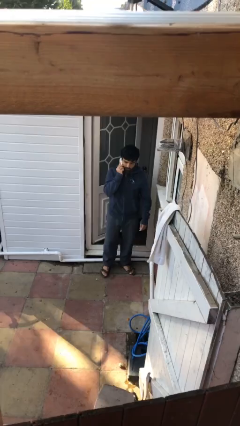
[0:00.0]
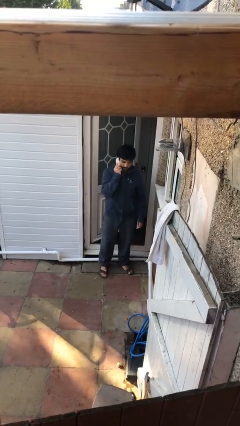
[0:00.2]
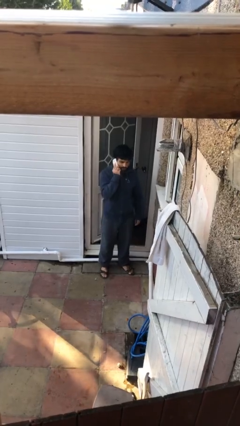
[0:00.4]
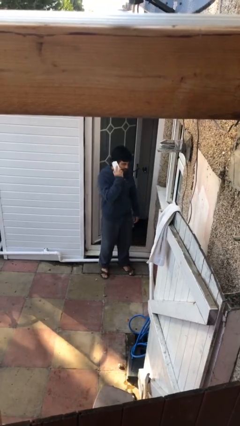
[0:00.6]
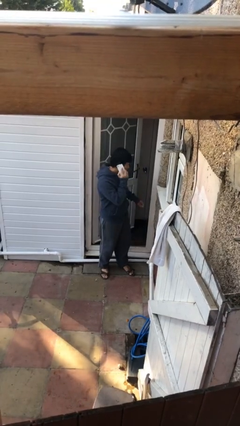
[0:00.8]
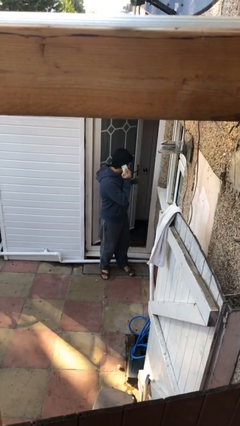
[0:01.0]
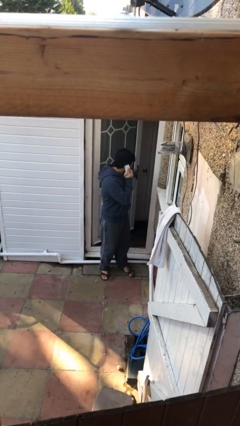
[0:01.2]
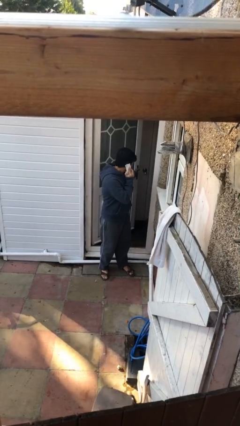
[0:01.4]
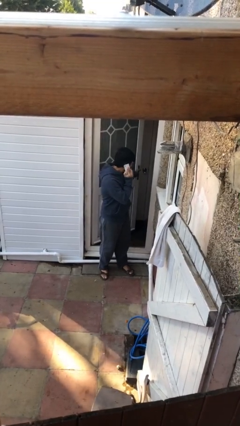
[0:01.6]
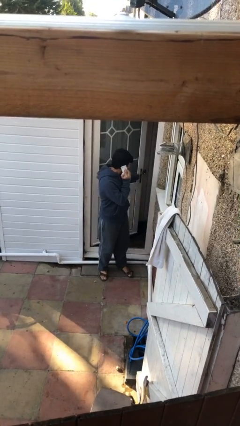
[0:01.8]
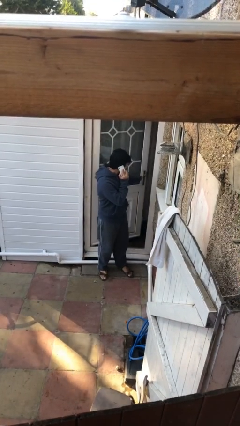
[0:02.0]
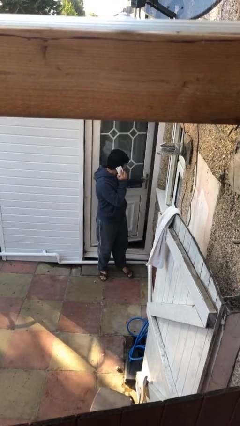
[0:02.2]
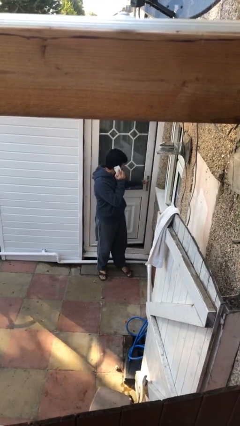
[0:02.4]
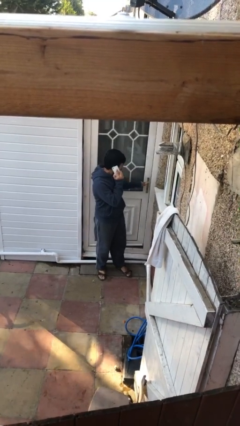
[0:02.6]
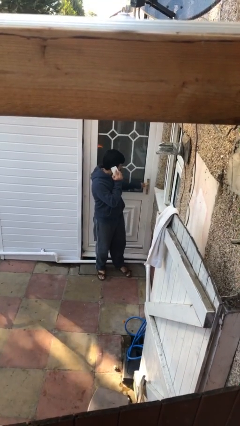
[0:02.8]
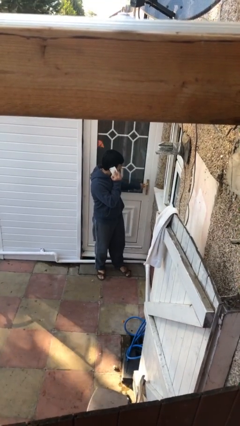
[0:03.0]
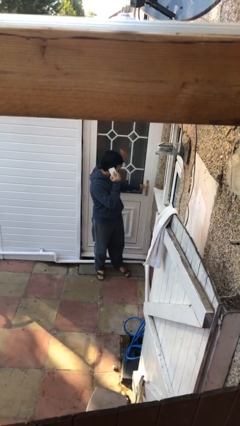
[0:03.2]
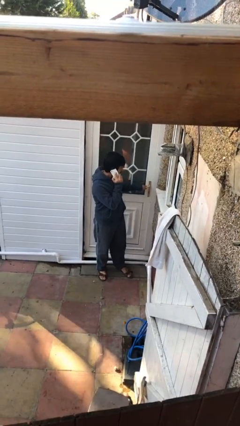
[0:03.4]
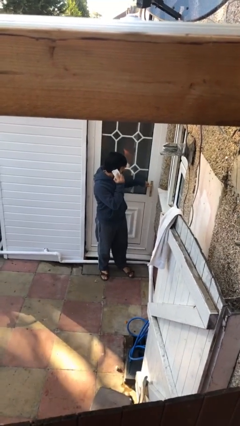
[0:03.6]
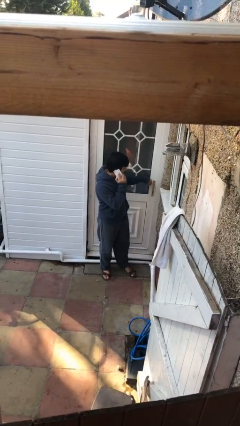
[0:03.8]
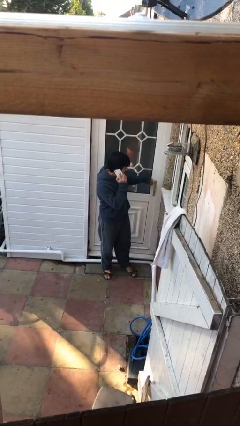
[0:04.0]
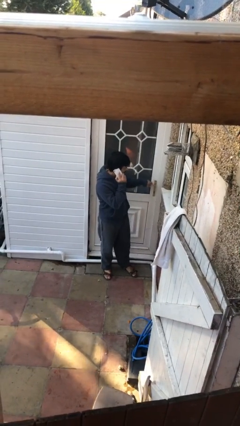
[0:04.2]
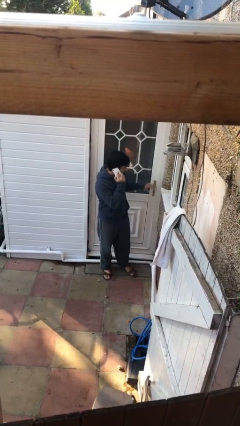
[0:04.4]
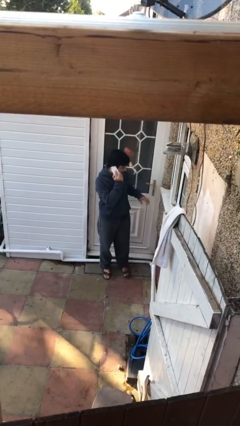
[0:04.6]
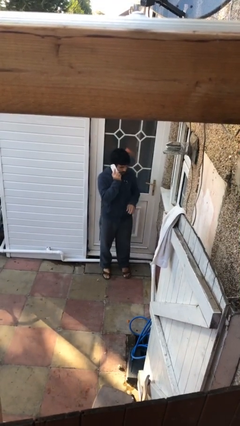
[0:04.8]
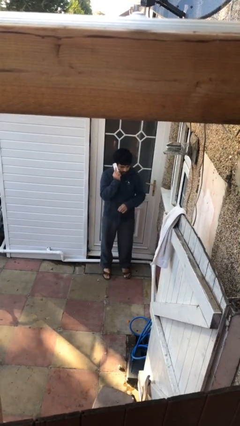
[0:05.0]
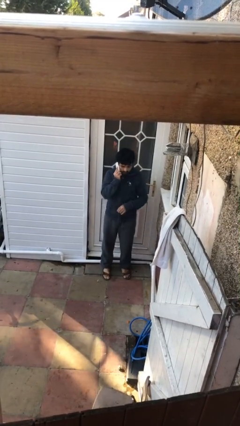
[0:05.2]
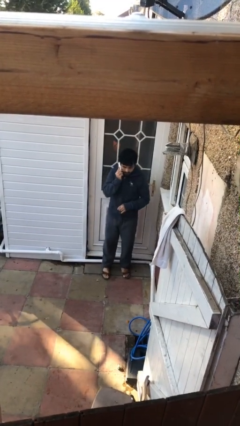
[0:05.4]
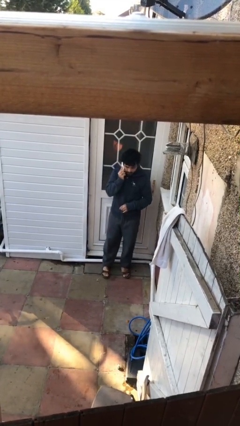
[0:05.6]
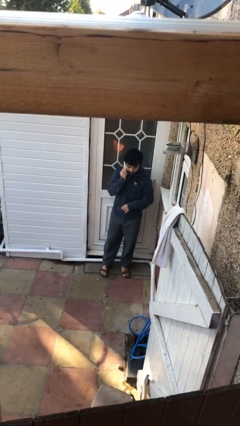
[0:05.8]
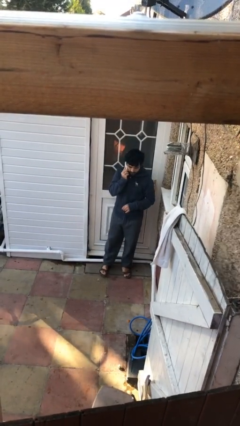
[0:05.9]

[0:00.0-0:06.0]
person closes facility door

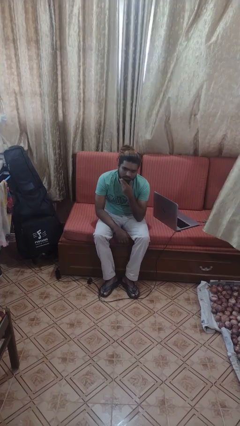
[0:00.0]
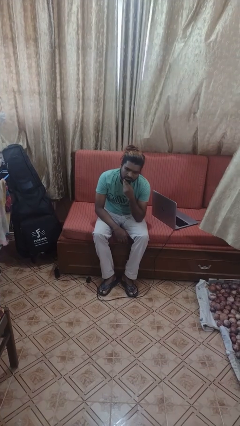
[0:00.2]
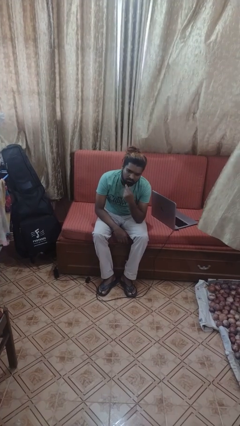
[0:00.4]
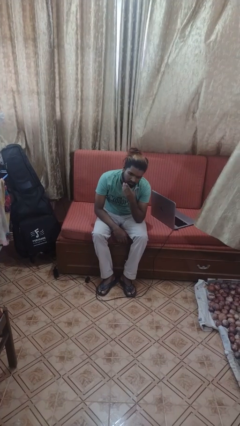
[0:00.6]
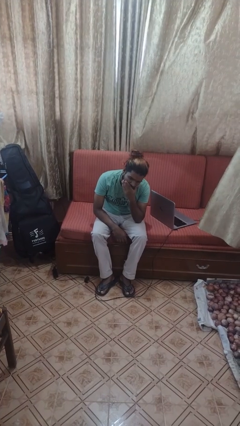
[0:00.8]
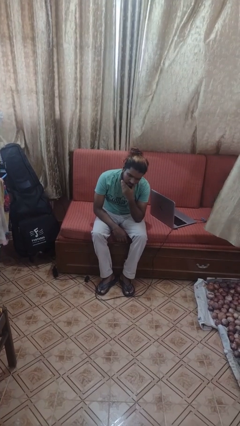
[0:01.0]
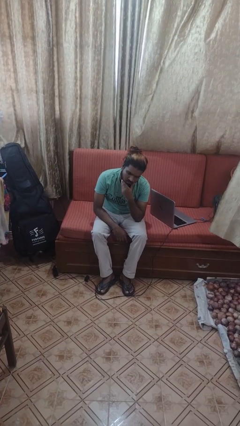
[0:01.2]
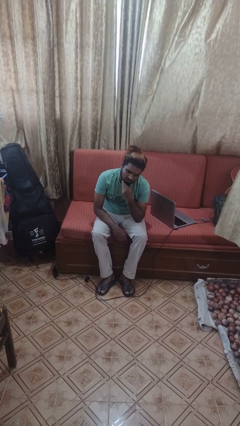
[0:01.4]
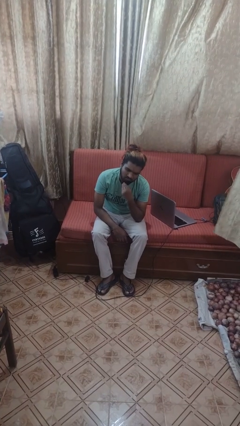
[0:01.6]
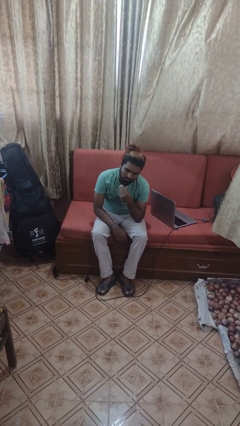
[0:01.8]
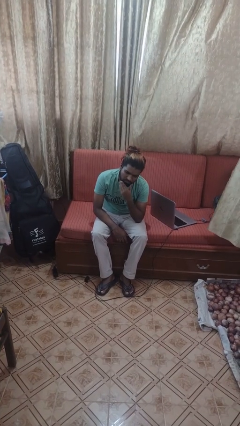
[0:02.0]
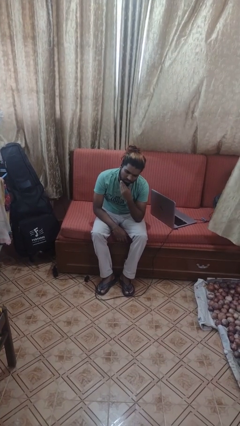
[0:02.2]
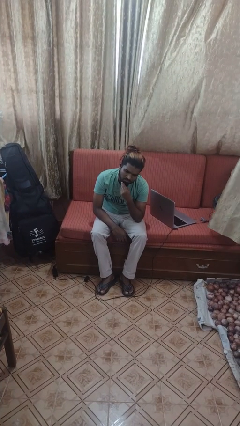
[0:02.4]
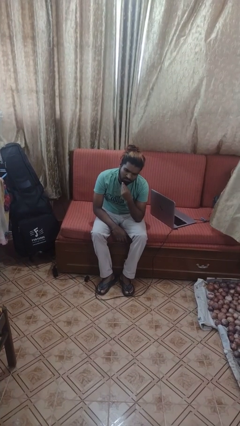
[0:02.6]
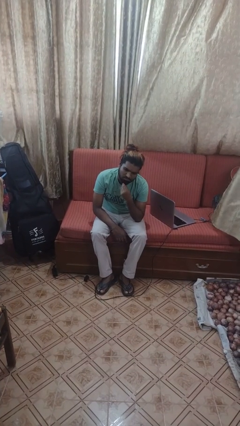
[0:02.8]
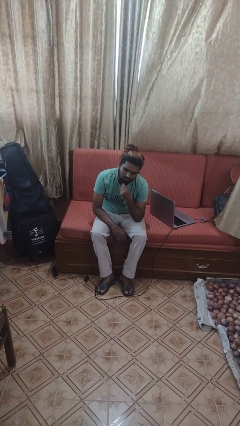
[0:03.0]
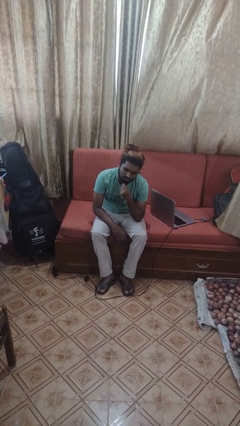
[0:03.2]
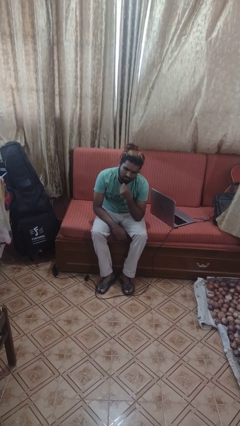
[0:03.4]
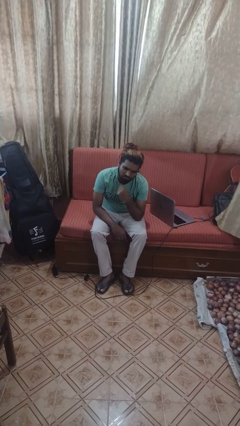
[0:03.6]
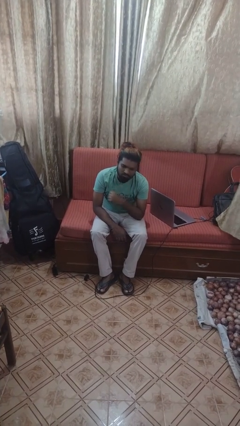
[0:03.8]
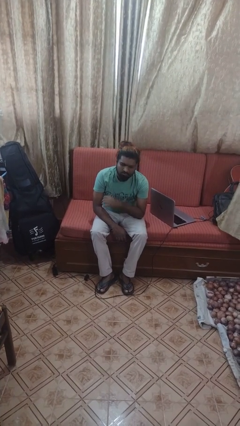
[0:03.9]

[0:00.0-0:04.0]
person strokes chin

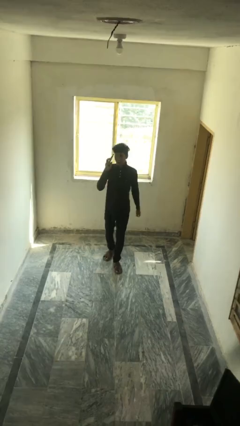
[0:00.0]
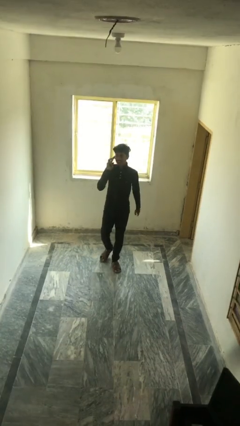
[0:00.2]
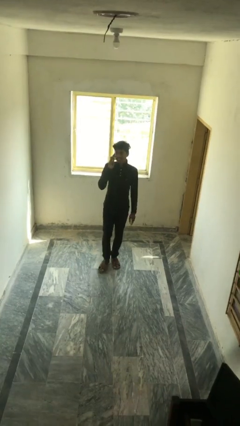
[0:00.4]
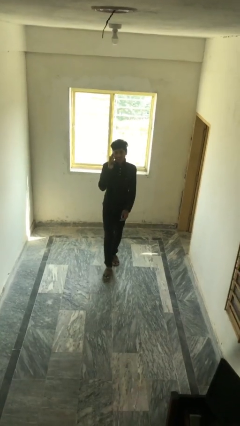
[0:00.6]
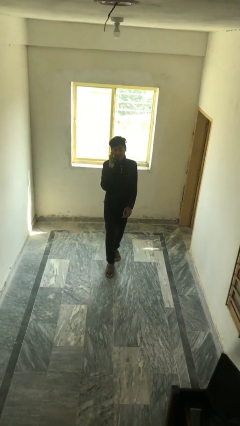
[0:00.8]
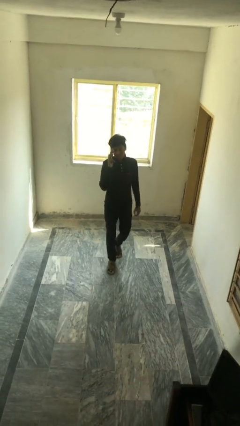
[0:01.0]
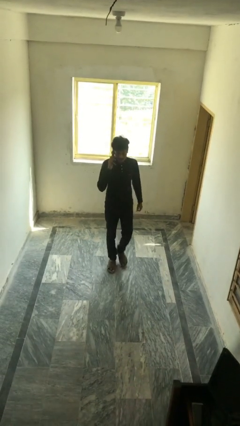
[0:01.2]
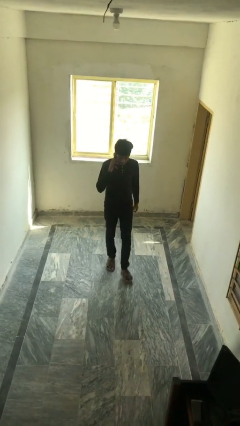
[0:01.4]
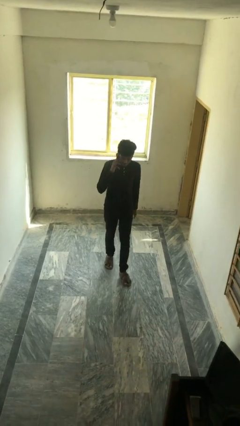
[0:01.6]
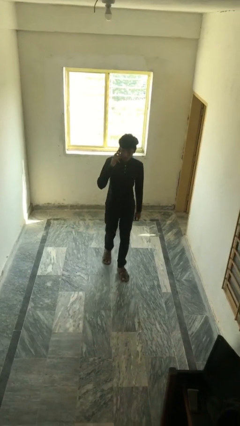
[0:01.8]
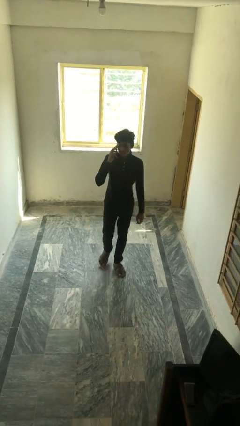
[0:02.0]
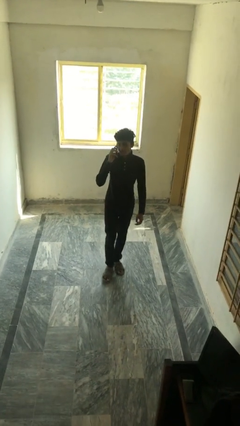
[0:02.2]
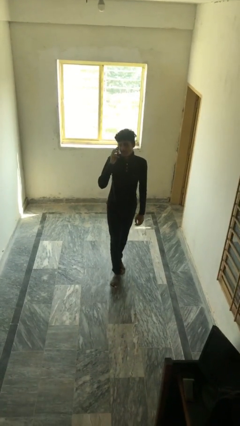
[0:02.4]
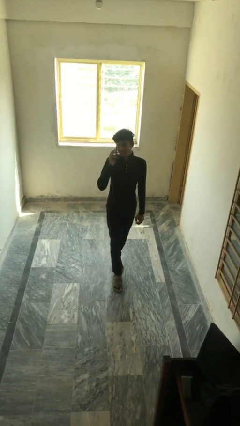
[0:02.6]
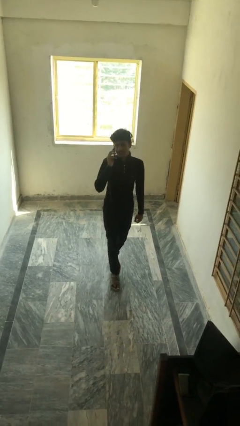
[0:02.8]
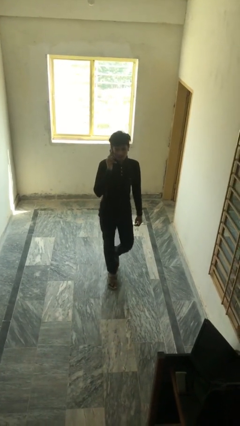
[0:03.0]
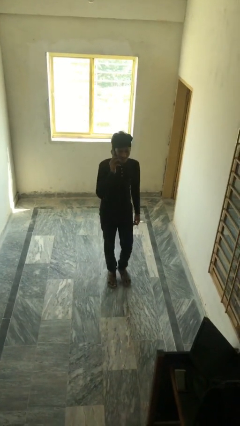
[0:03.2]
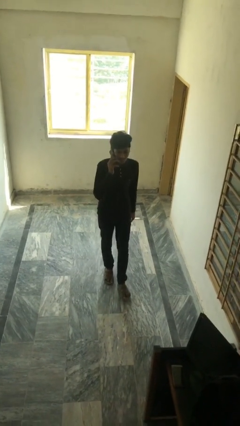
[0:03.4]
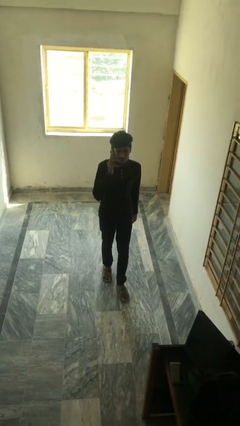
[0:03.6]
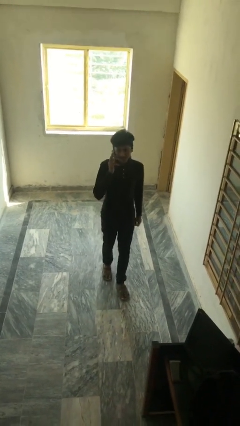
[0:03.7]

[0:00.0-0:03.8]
person talks on phone

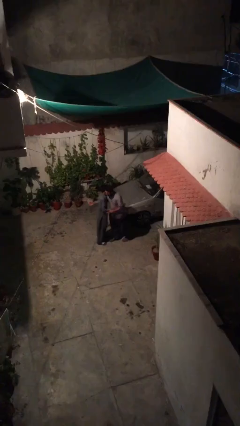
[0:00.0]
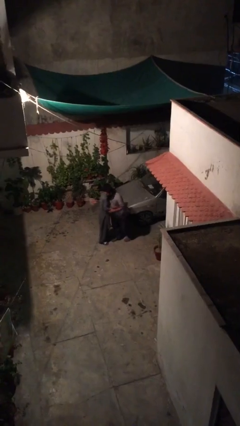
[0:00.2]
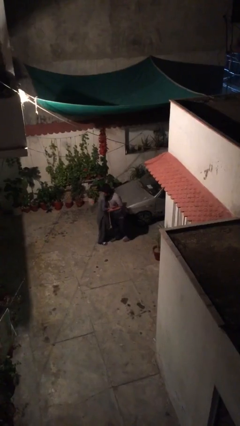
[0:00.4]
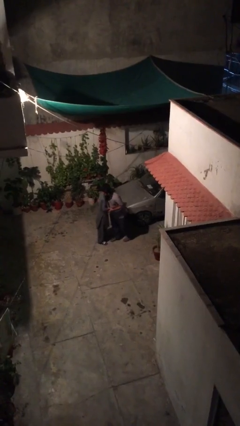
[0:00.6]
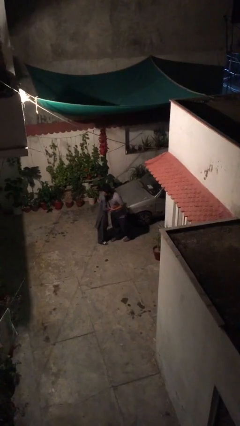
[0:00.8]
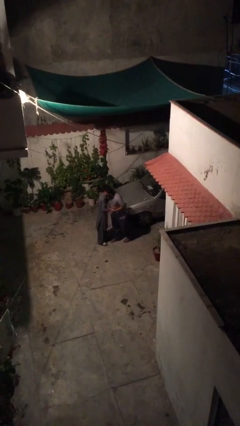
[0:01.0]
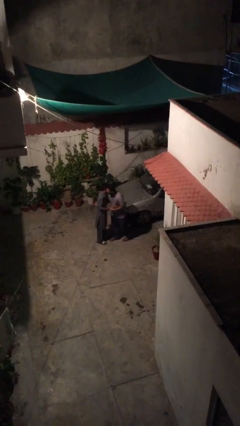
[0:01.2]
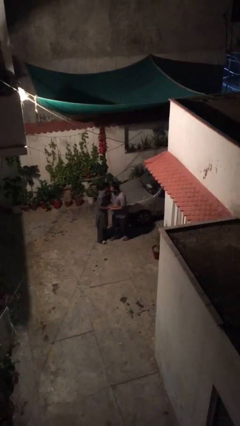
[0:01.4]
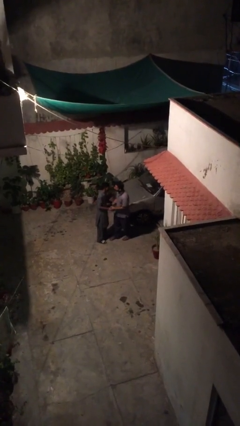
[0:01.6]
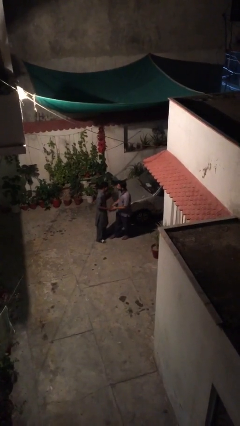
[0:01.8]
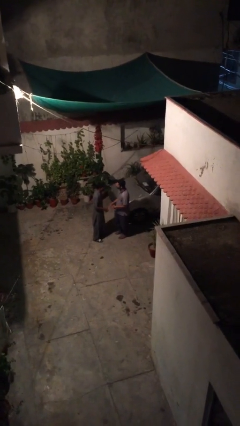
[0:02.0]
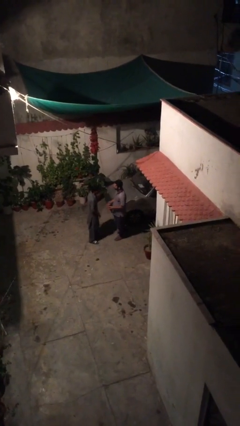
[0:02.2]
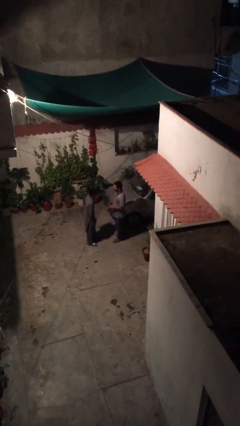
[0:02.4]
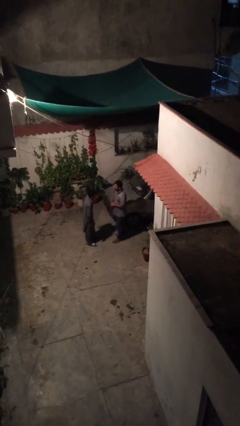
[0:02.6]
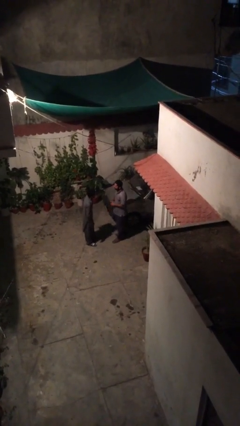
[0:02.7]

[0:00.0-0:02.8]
person embraces person

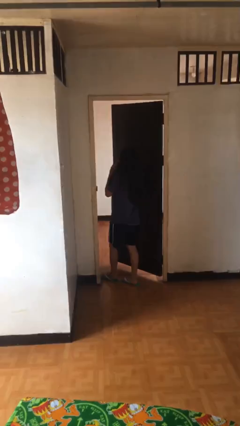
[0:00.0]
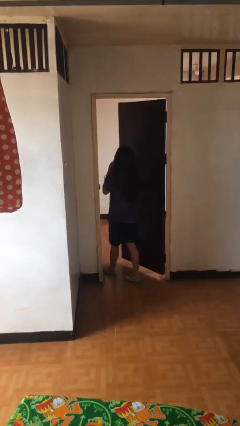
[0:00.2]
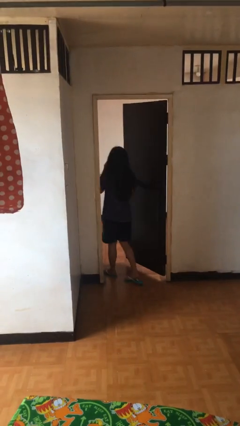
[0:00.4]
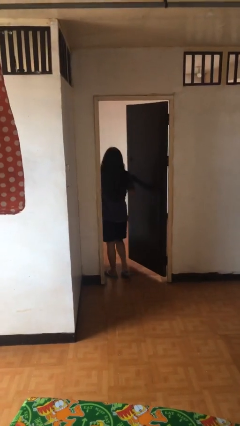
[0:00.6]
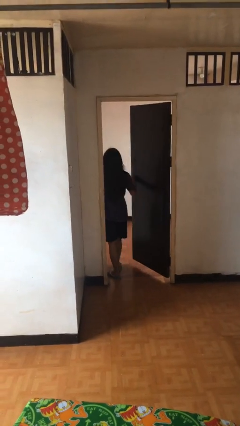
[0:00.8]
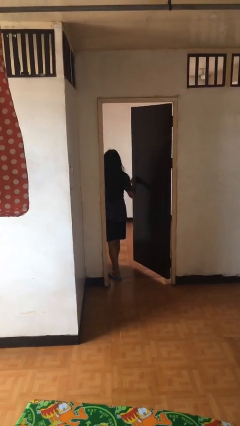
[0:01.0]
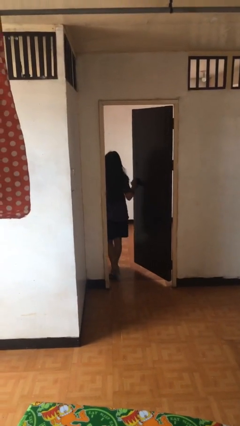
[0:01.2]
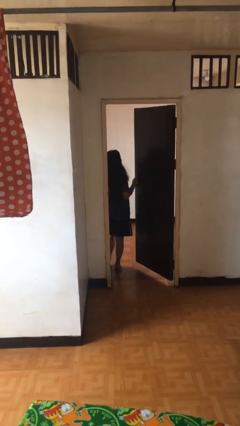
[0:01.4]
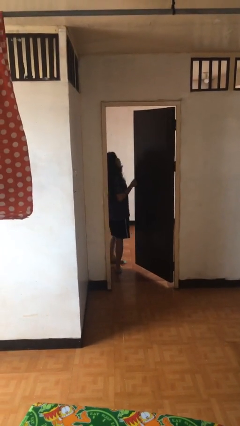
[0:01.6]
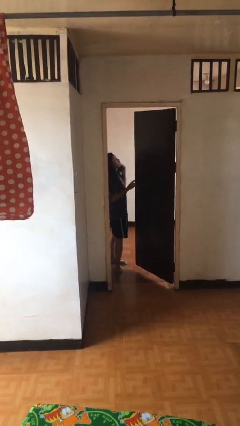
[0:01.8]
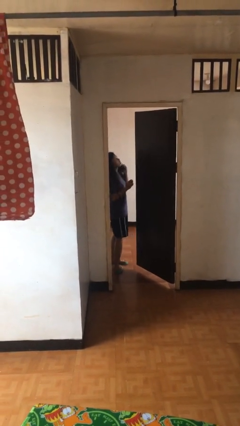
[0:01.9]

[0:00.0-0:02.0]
person exits scene through structure
